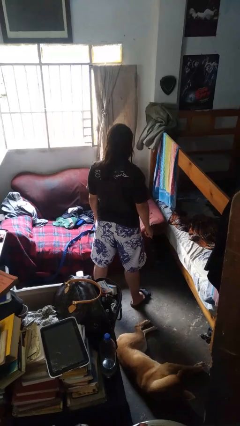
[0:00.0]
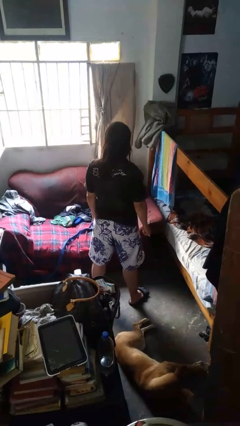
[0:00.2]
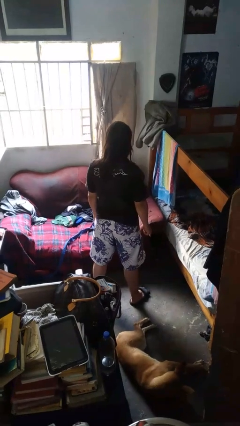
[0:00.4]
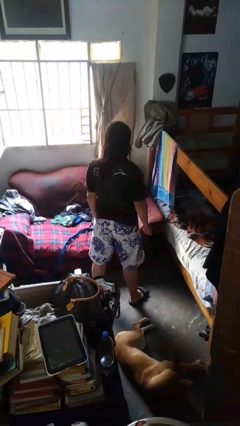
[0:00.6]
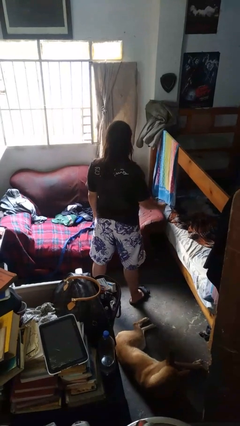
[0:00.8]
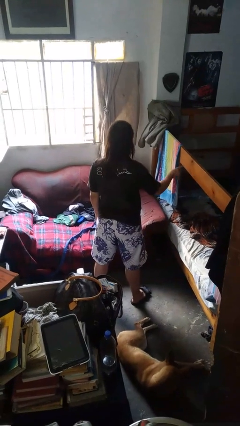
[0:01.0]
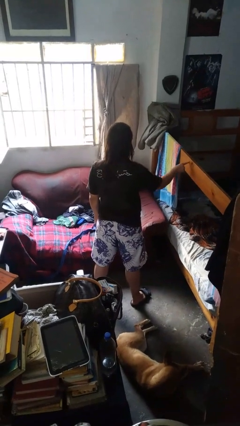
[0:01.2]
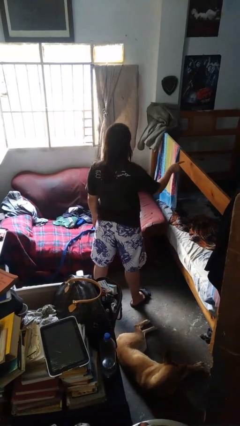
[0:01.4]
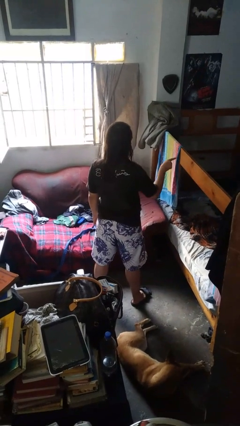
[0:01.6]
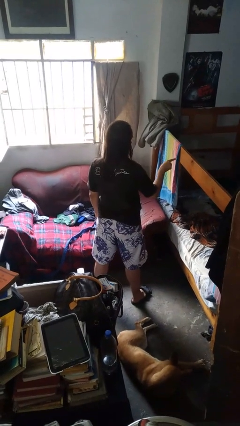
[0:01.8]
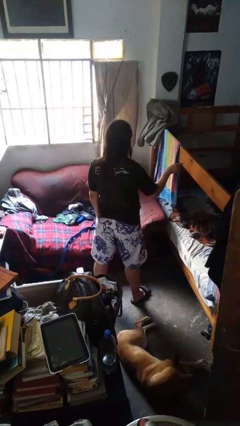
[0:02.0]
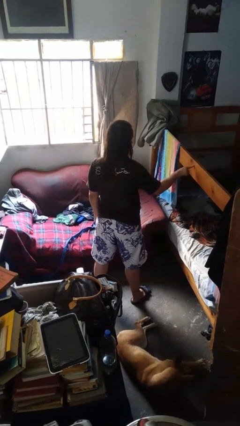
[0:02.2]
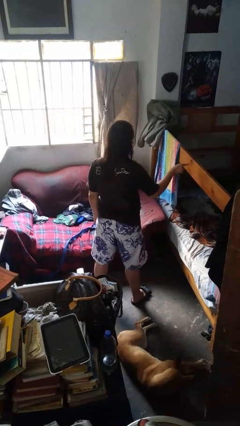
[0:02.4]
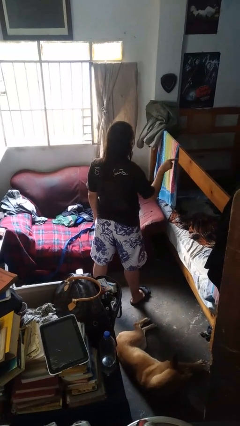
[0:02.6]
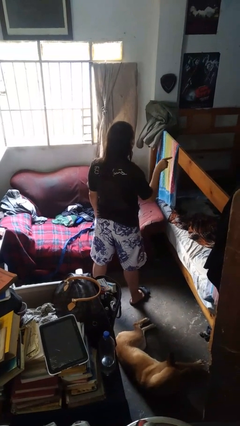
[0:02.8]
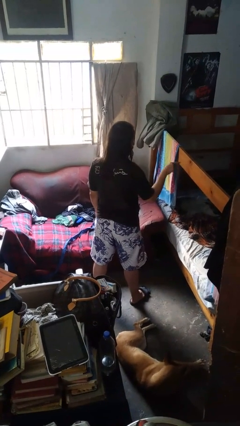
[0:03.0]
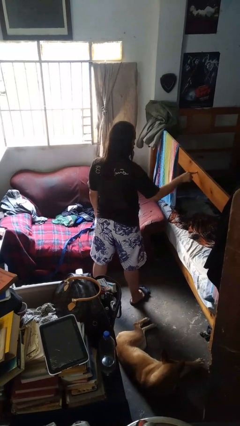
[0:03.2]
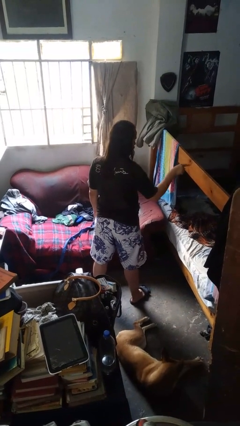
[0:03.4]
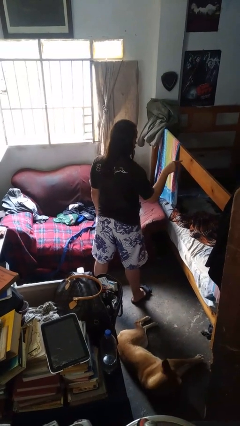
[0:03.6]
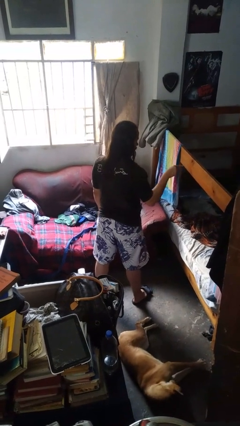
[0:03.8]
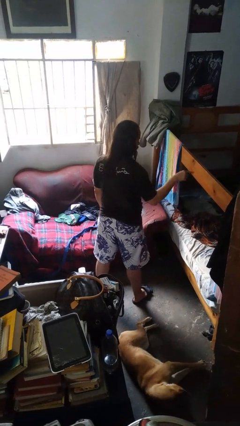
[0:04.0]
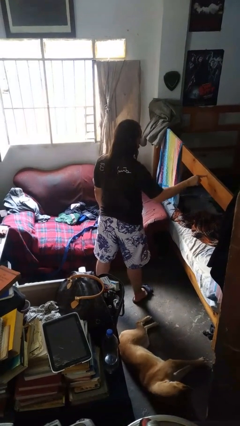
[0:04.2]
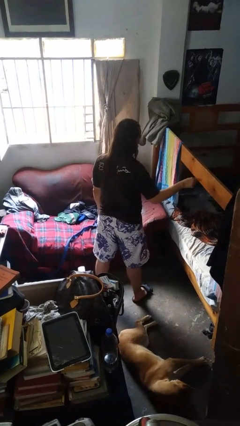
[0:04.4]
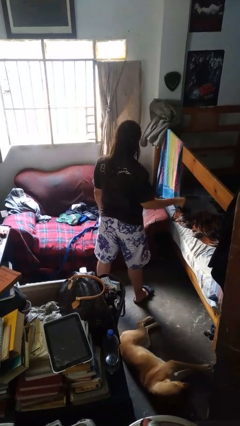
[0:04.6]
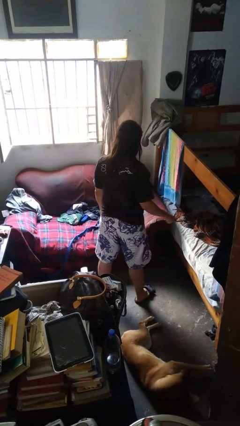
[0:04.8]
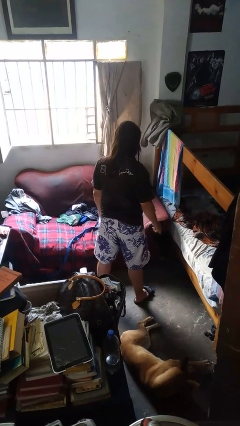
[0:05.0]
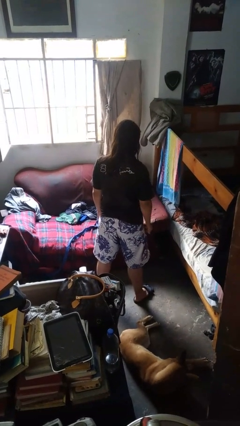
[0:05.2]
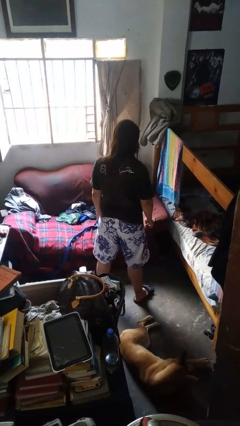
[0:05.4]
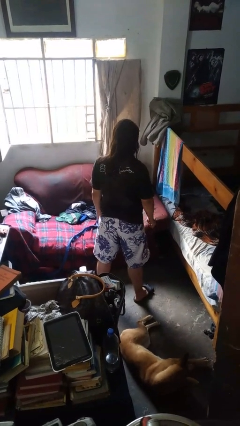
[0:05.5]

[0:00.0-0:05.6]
person taps object with finger

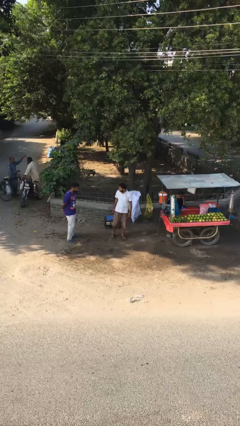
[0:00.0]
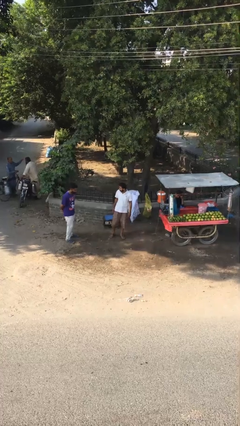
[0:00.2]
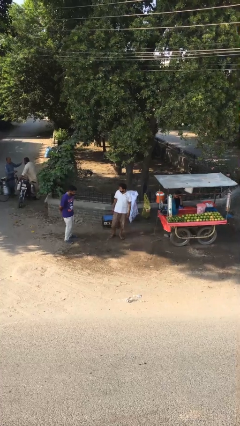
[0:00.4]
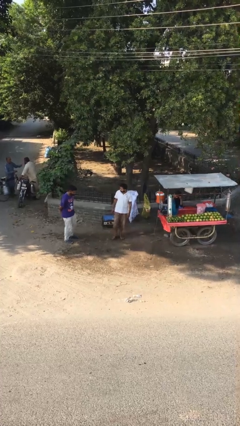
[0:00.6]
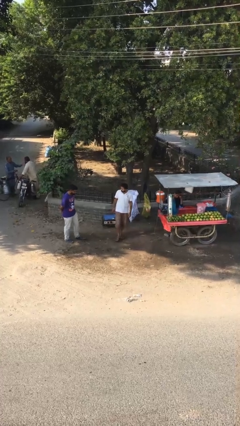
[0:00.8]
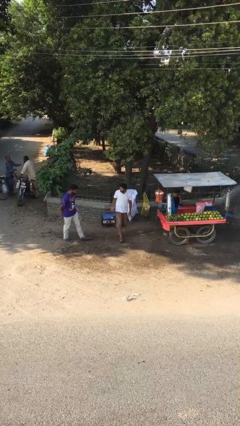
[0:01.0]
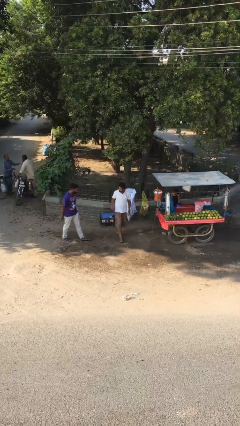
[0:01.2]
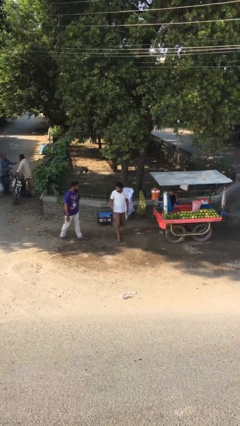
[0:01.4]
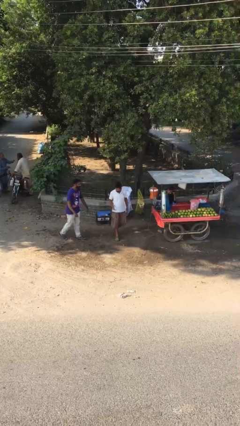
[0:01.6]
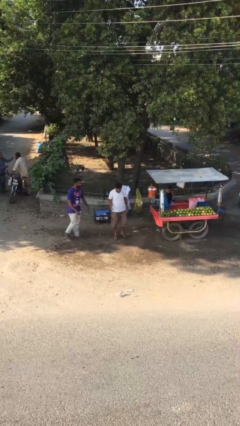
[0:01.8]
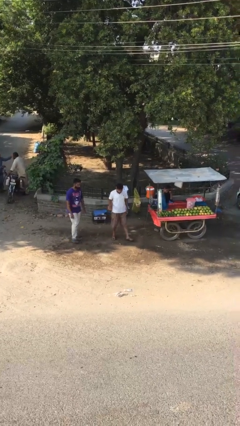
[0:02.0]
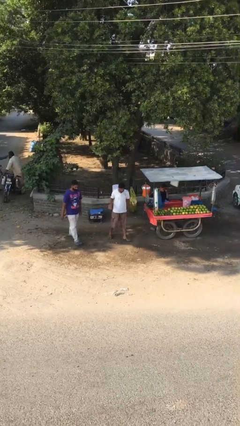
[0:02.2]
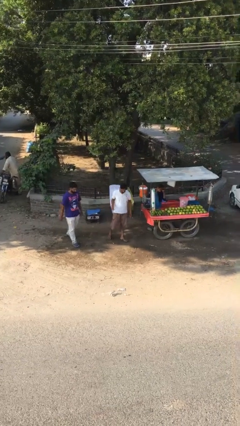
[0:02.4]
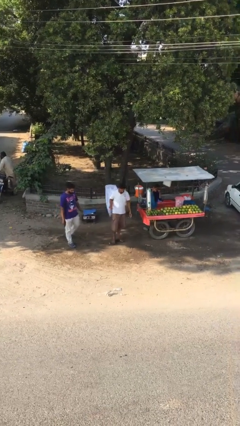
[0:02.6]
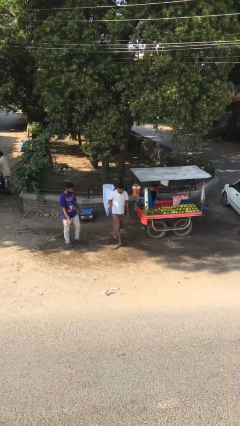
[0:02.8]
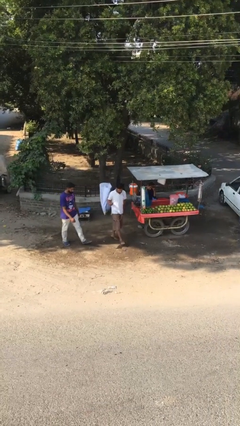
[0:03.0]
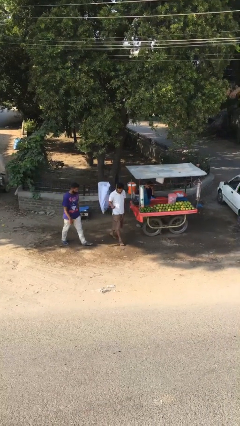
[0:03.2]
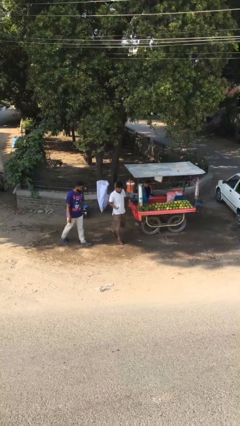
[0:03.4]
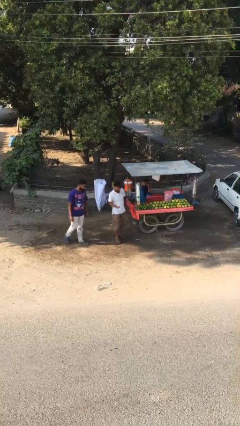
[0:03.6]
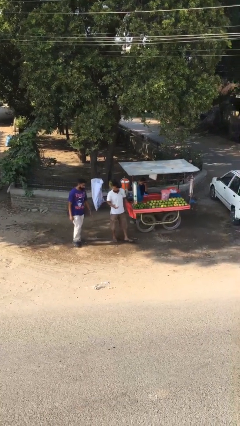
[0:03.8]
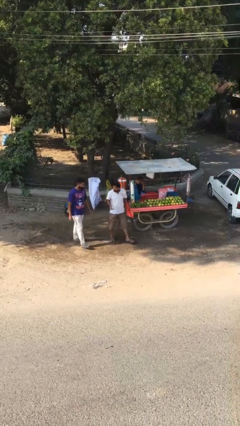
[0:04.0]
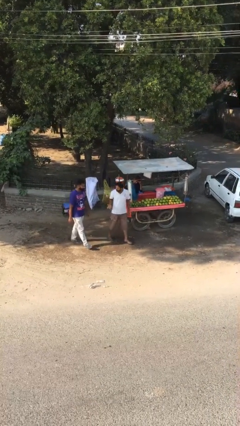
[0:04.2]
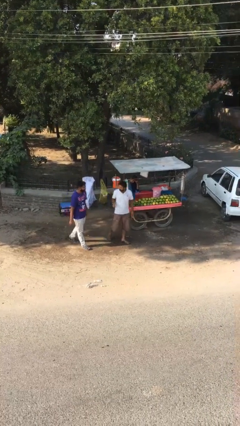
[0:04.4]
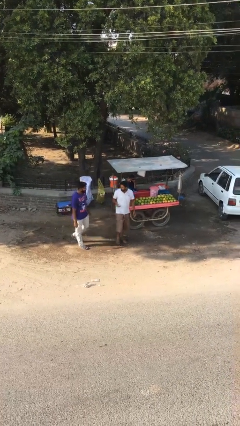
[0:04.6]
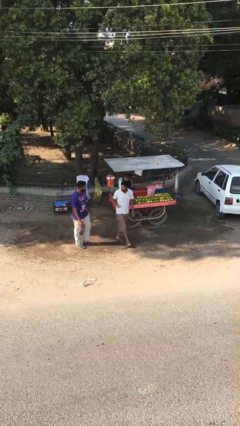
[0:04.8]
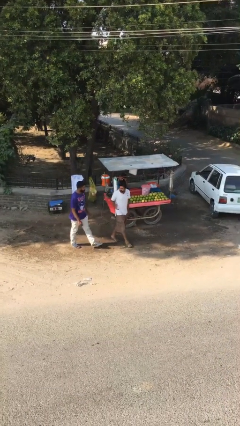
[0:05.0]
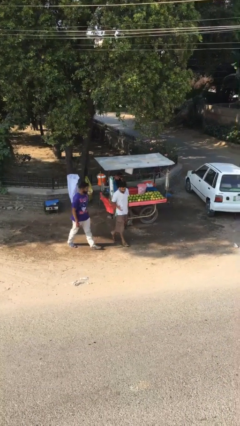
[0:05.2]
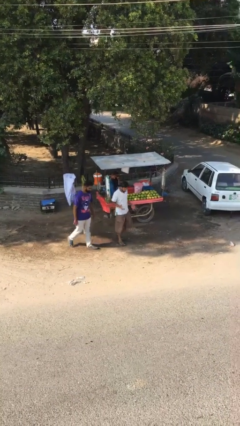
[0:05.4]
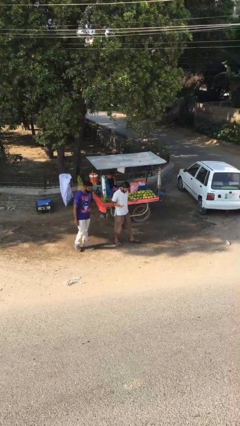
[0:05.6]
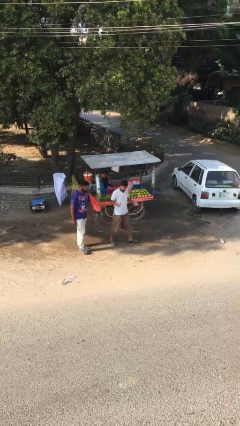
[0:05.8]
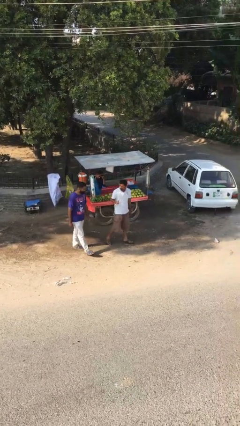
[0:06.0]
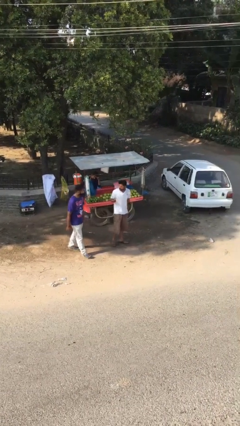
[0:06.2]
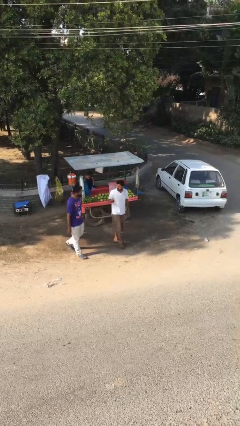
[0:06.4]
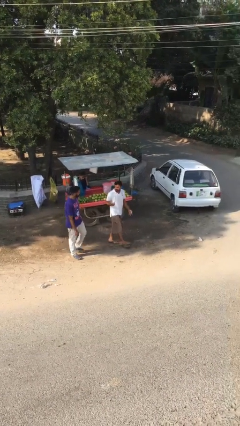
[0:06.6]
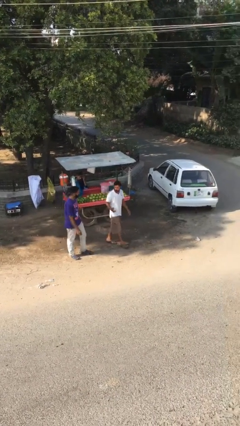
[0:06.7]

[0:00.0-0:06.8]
person talks to person

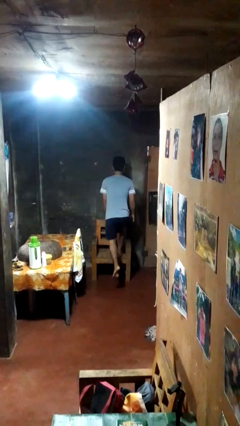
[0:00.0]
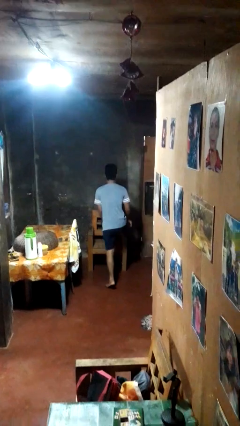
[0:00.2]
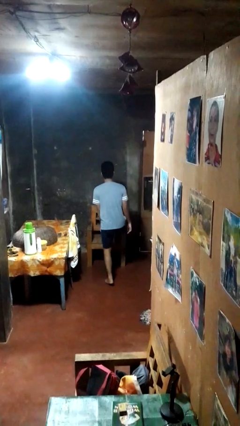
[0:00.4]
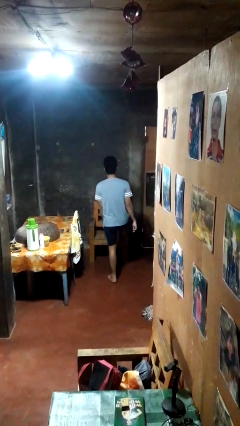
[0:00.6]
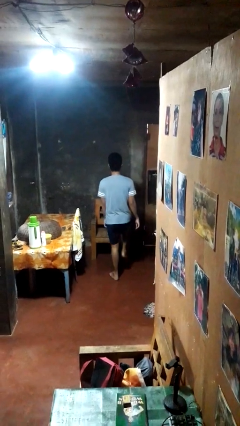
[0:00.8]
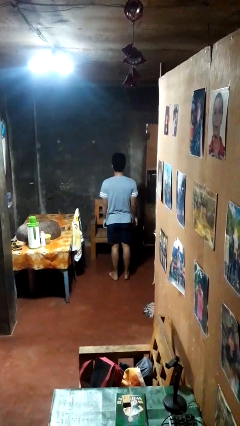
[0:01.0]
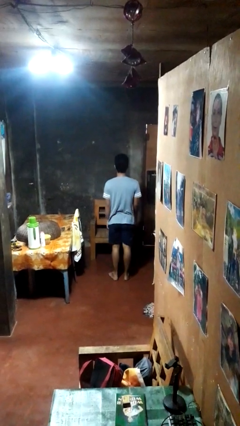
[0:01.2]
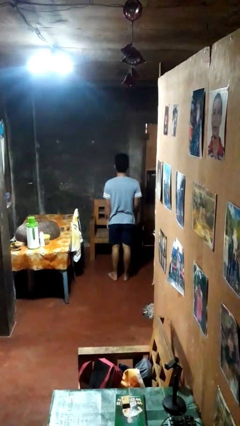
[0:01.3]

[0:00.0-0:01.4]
person climbs off chair

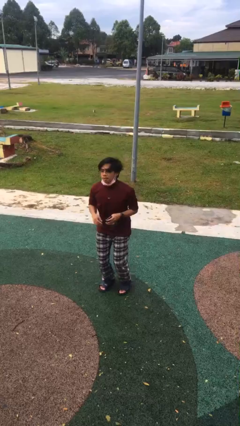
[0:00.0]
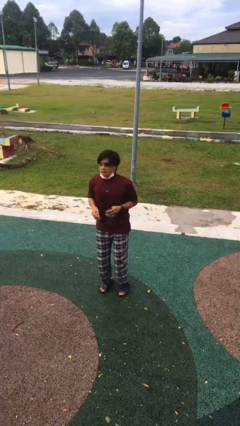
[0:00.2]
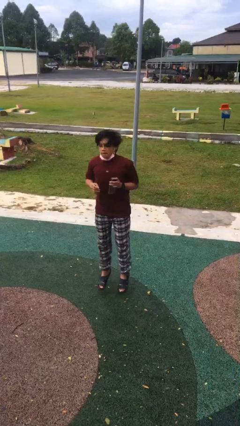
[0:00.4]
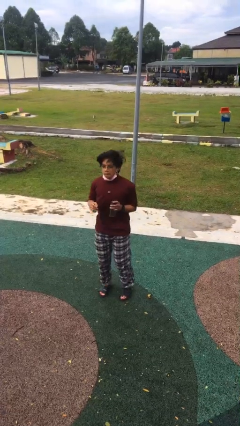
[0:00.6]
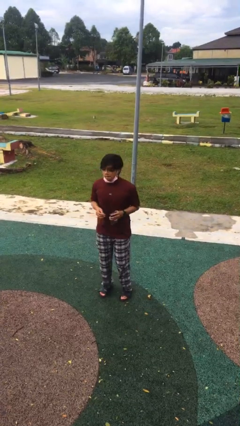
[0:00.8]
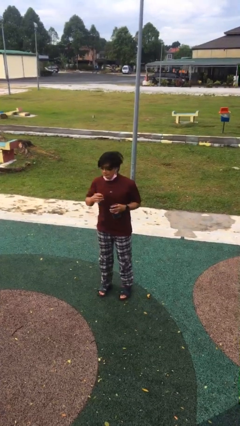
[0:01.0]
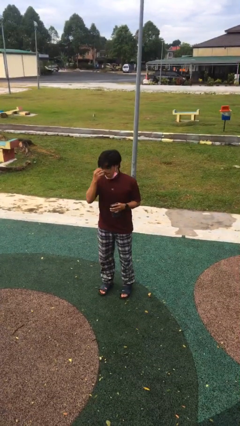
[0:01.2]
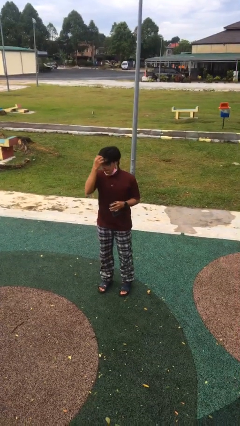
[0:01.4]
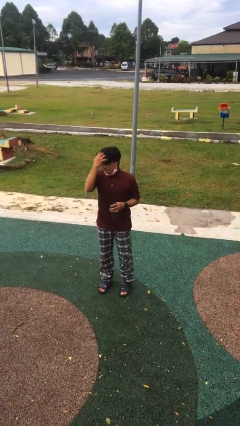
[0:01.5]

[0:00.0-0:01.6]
person jumps

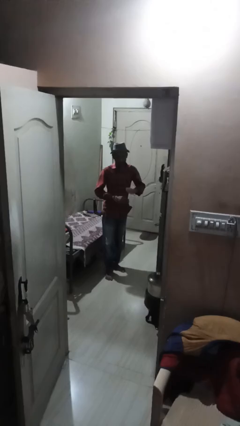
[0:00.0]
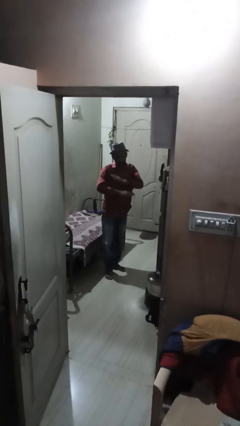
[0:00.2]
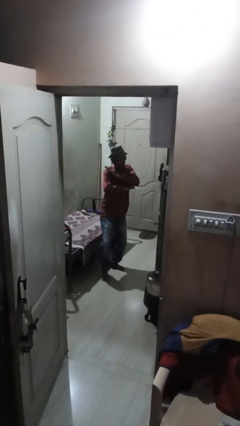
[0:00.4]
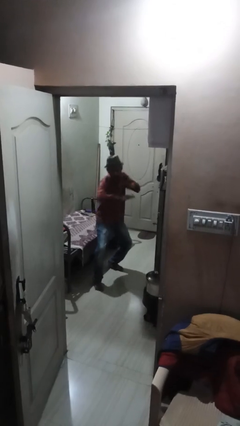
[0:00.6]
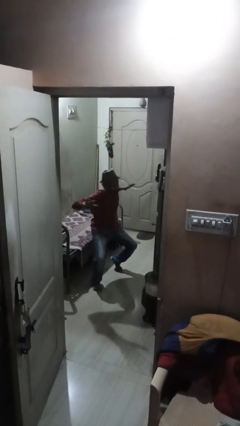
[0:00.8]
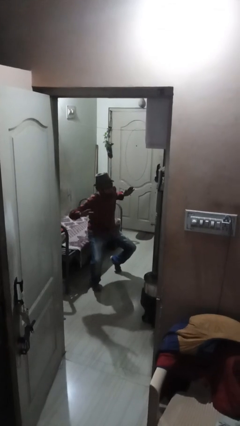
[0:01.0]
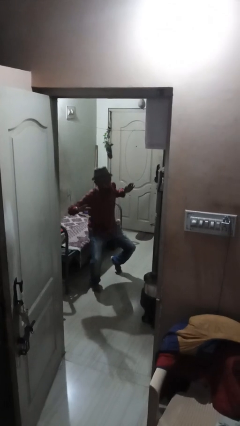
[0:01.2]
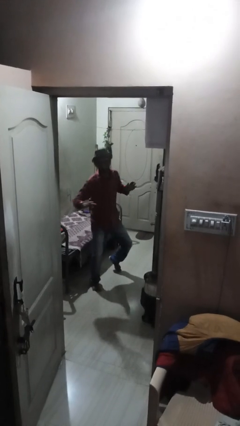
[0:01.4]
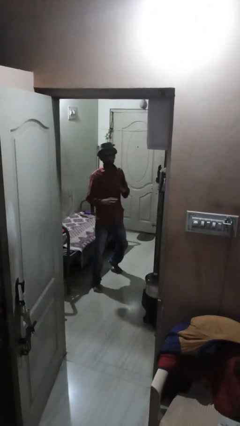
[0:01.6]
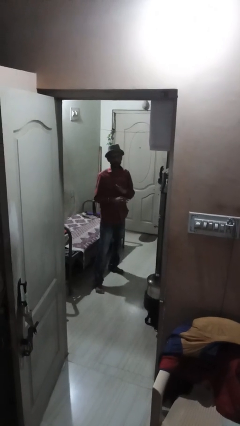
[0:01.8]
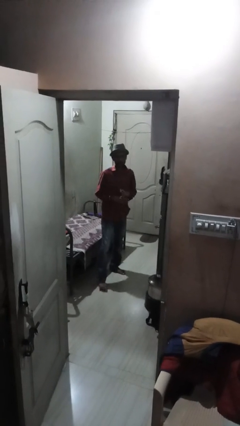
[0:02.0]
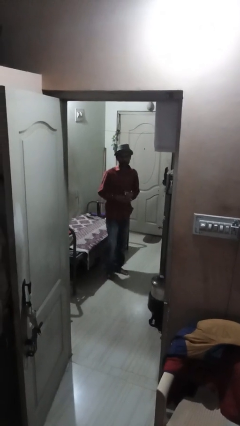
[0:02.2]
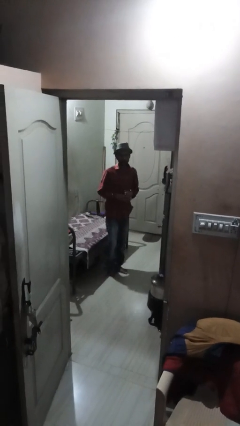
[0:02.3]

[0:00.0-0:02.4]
person karate chop
